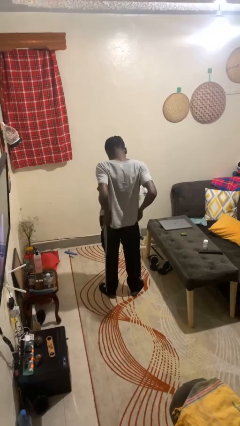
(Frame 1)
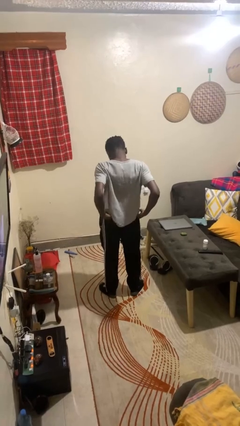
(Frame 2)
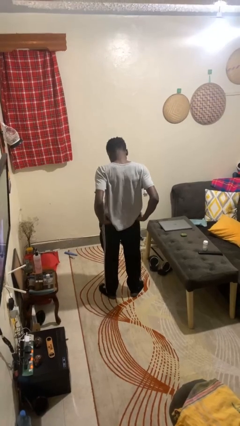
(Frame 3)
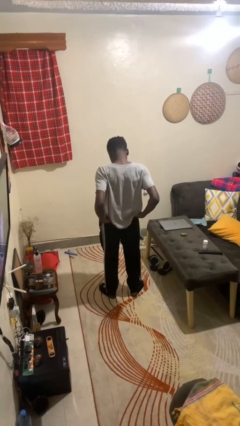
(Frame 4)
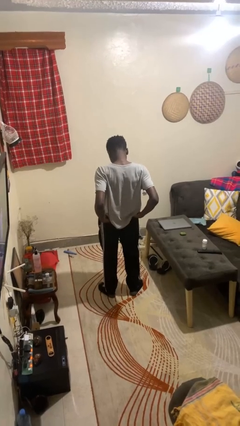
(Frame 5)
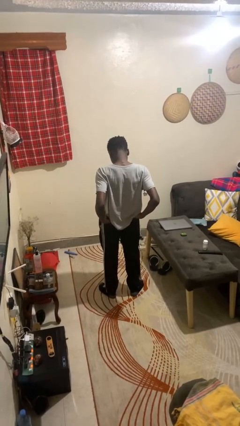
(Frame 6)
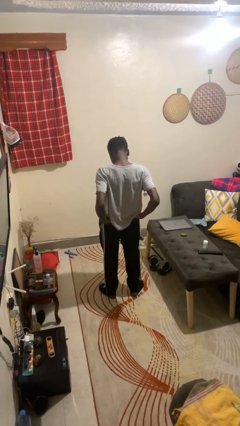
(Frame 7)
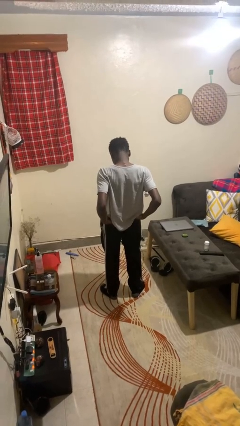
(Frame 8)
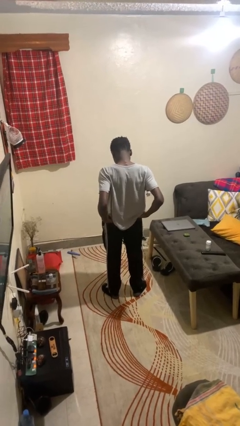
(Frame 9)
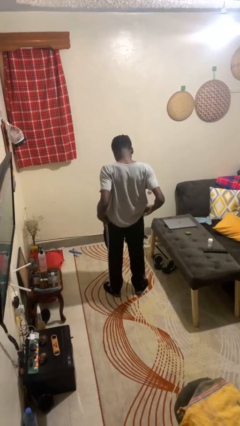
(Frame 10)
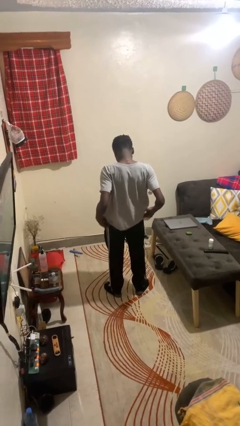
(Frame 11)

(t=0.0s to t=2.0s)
person puts hands in back pockets

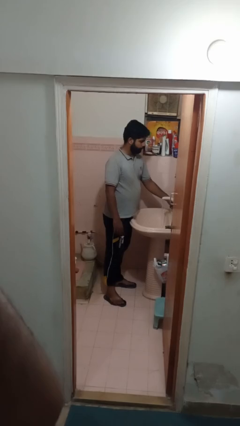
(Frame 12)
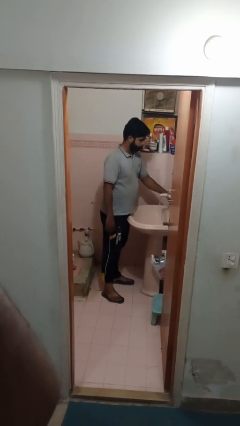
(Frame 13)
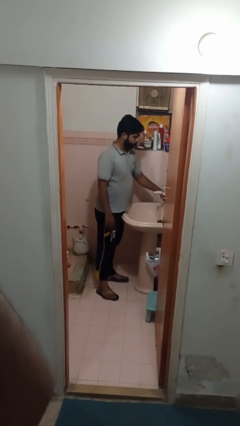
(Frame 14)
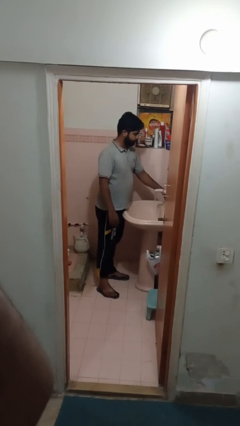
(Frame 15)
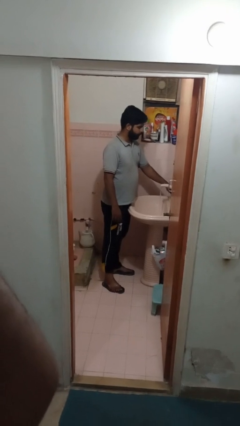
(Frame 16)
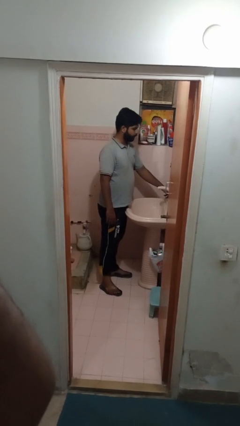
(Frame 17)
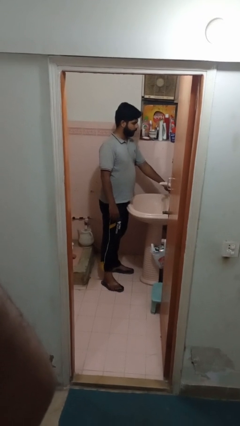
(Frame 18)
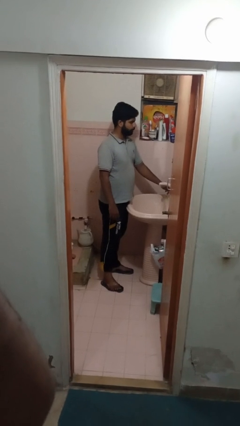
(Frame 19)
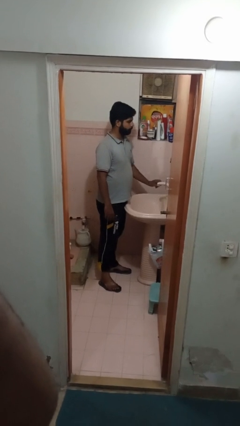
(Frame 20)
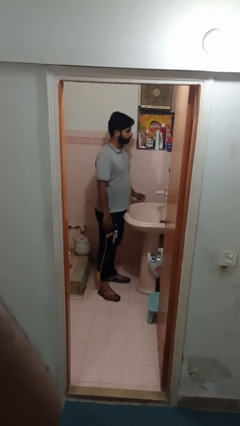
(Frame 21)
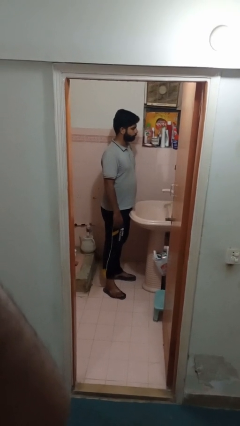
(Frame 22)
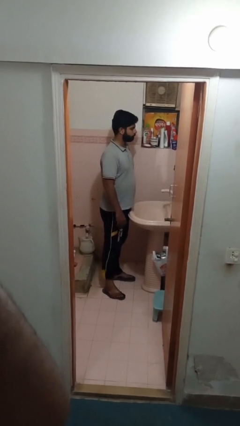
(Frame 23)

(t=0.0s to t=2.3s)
person turns off faucet

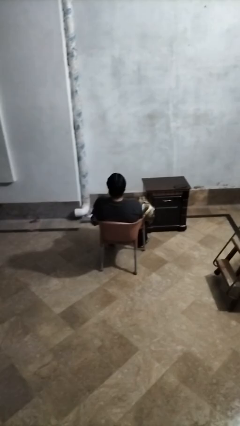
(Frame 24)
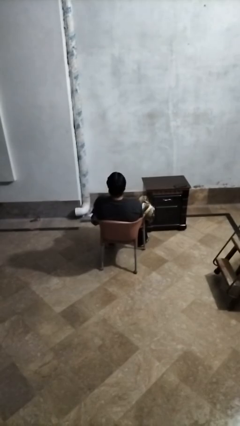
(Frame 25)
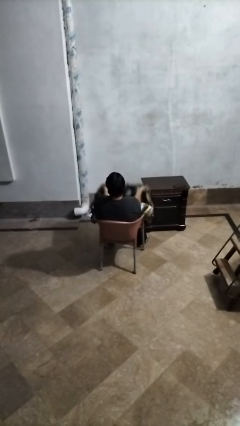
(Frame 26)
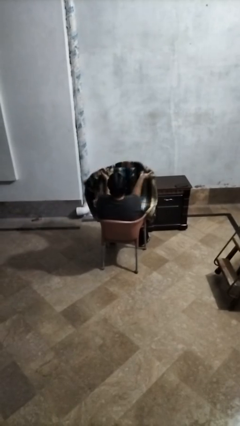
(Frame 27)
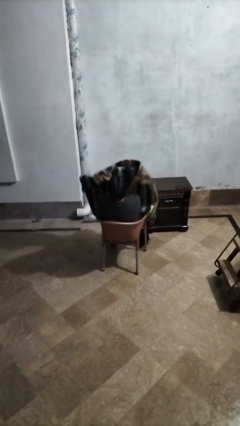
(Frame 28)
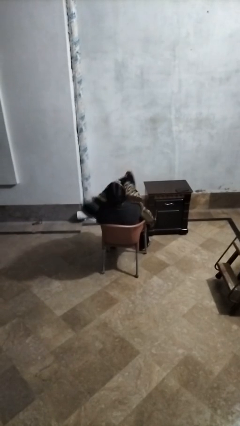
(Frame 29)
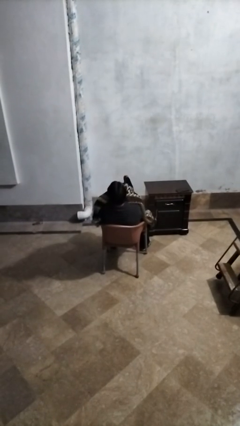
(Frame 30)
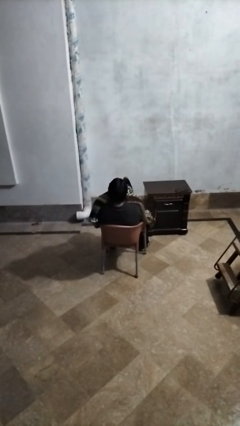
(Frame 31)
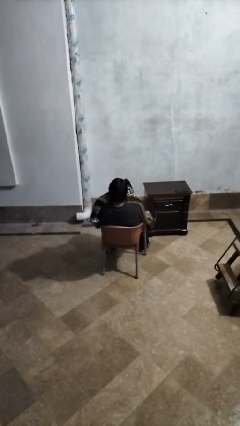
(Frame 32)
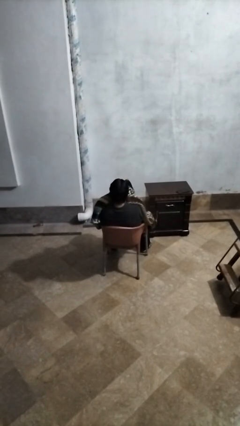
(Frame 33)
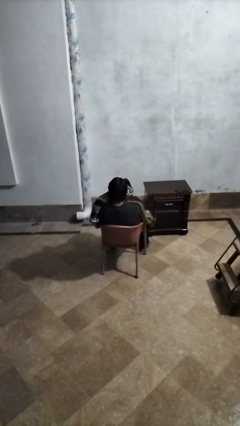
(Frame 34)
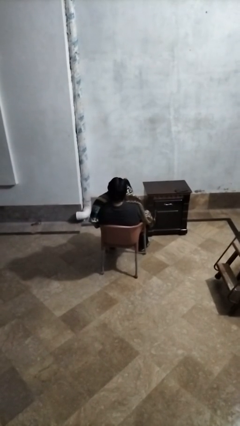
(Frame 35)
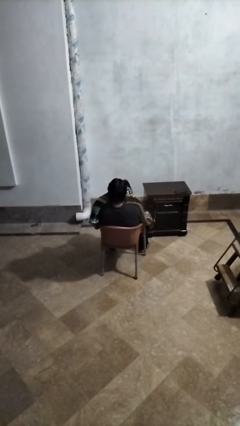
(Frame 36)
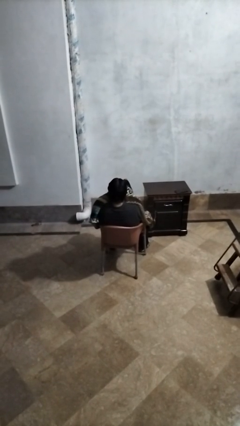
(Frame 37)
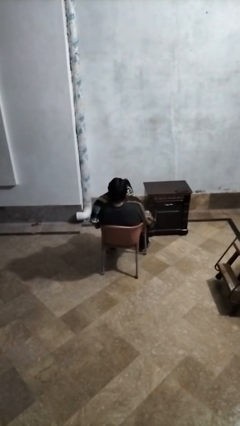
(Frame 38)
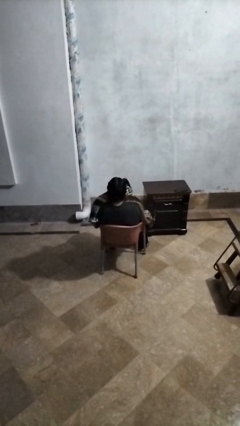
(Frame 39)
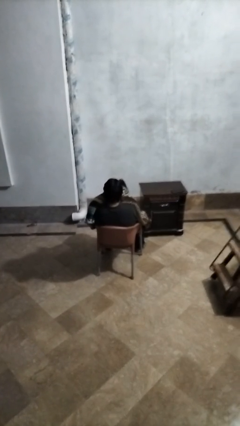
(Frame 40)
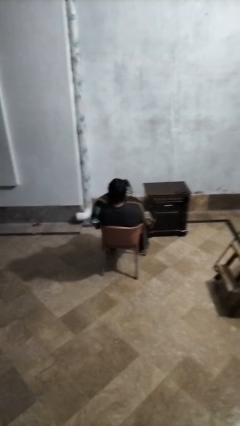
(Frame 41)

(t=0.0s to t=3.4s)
person covers with blanket

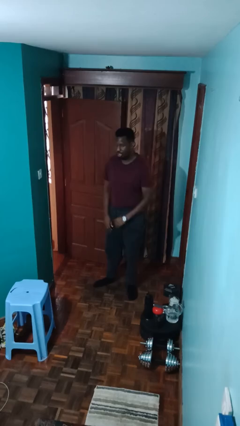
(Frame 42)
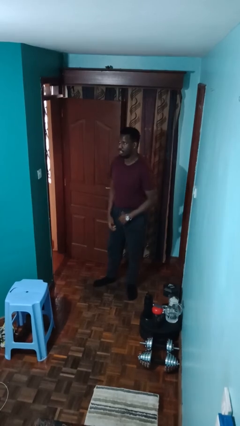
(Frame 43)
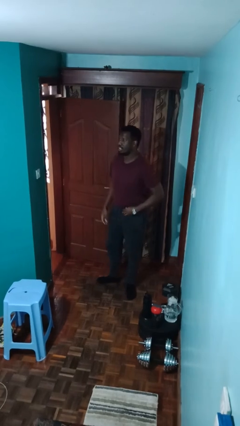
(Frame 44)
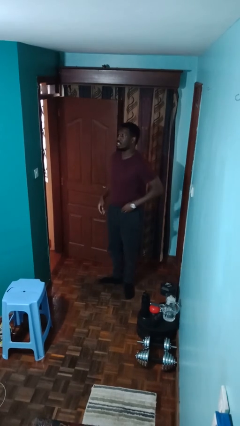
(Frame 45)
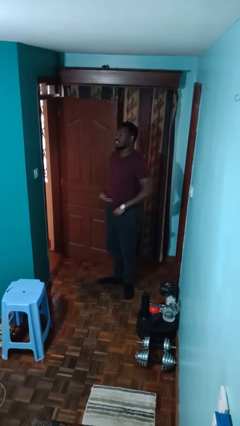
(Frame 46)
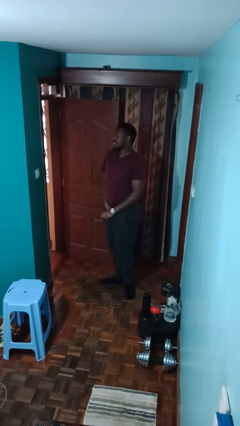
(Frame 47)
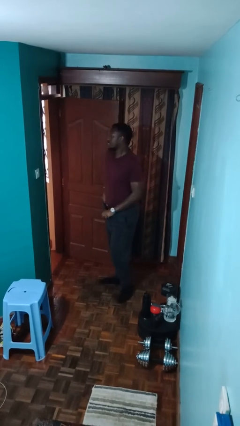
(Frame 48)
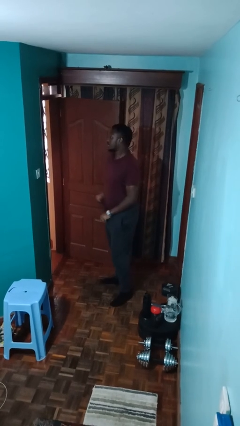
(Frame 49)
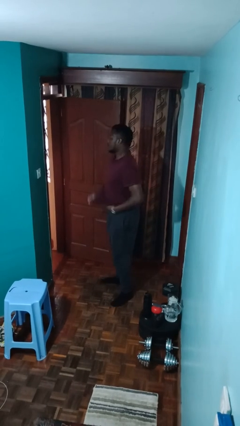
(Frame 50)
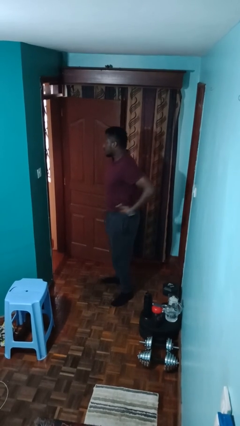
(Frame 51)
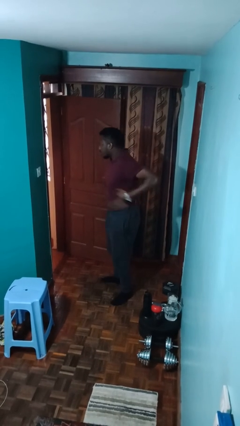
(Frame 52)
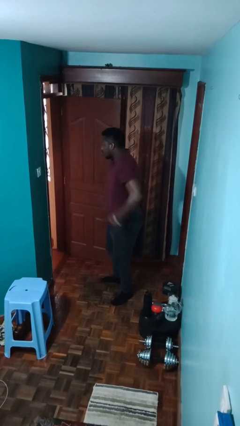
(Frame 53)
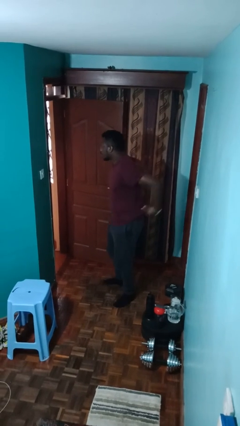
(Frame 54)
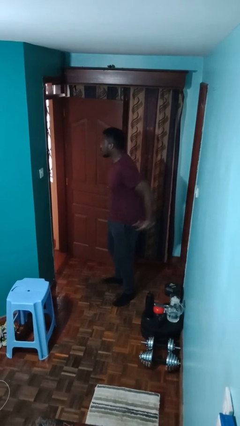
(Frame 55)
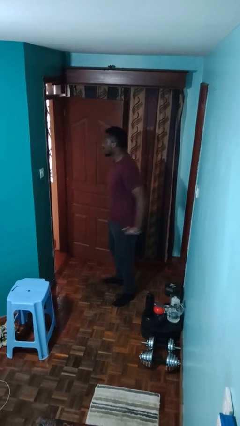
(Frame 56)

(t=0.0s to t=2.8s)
person untucks shirt

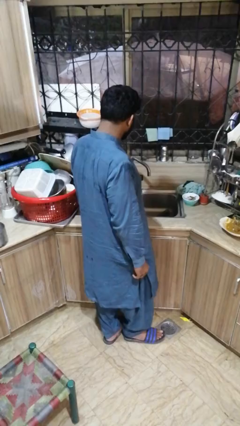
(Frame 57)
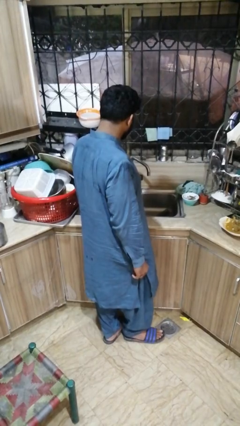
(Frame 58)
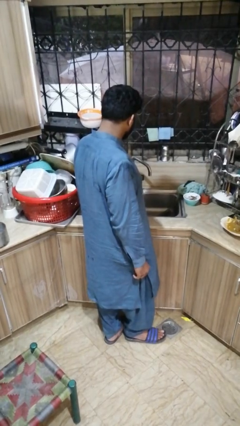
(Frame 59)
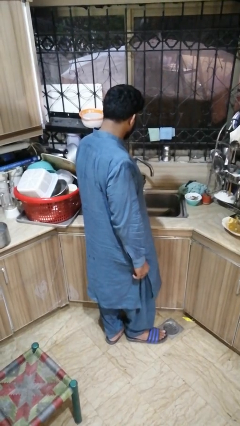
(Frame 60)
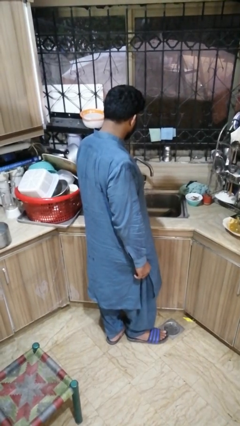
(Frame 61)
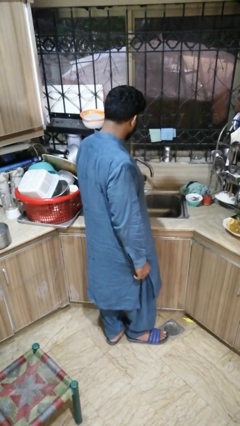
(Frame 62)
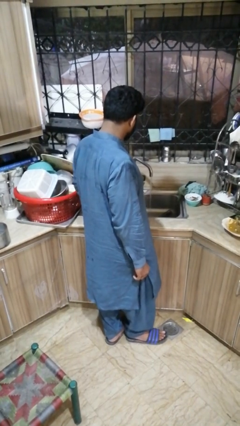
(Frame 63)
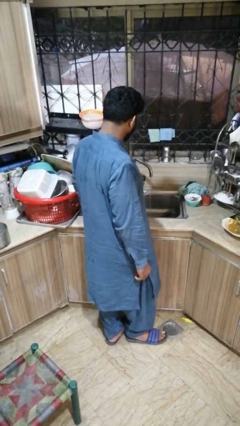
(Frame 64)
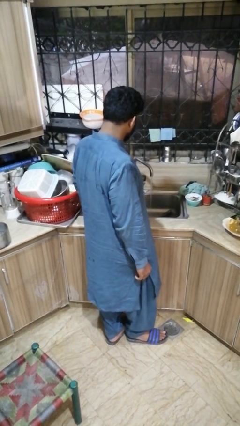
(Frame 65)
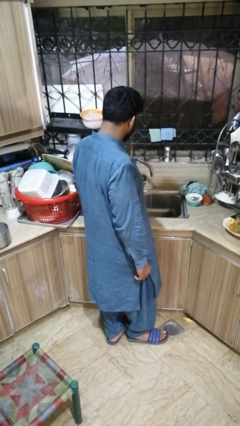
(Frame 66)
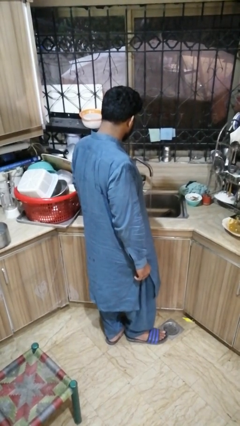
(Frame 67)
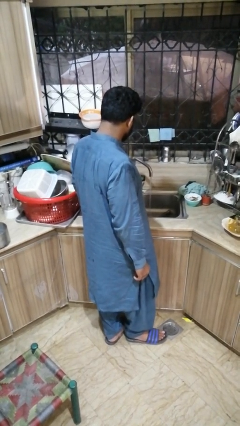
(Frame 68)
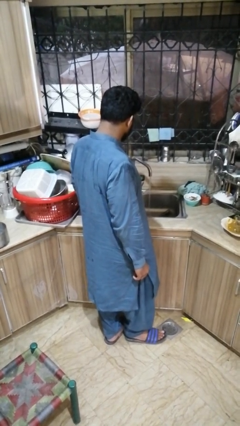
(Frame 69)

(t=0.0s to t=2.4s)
person turns on faucet

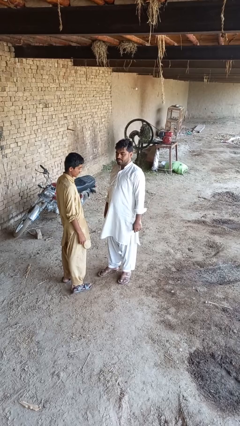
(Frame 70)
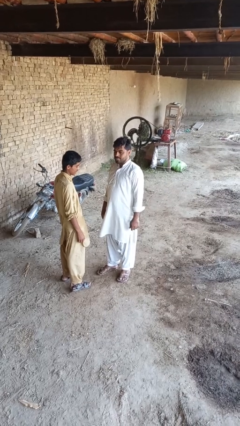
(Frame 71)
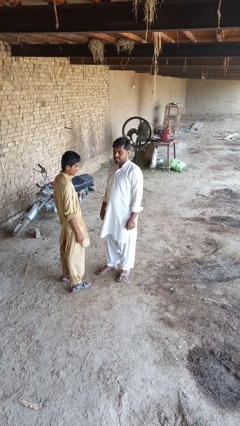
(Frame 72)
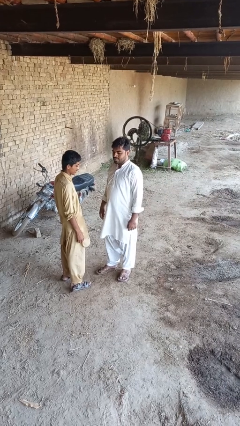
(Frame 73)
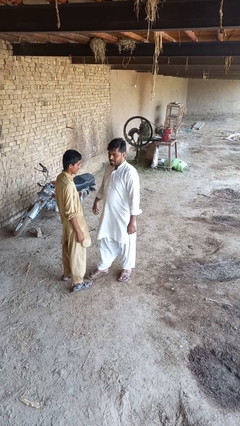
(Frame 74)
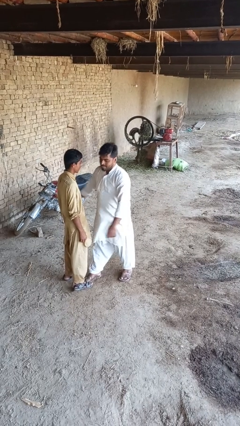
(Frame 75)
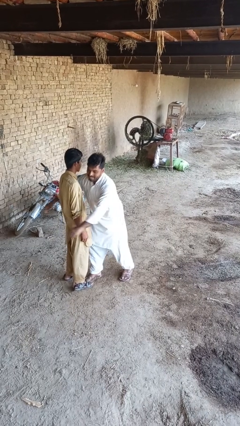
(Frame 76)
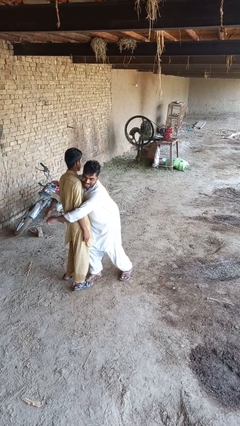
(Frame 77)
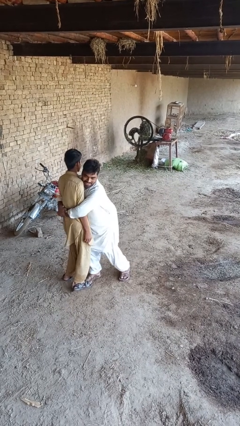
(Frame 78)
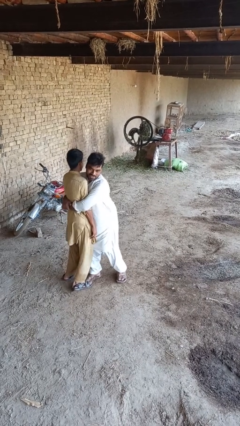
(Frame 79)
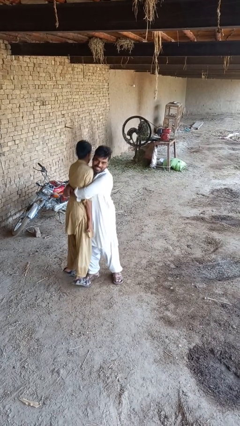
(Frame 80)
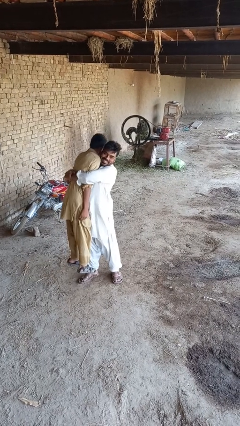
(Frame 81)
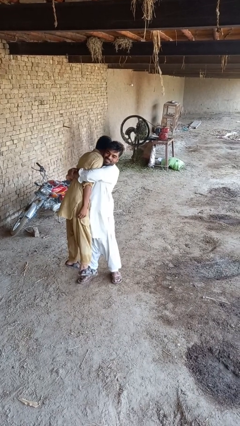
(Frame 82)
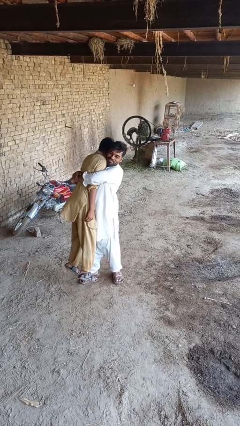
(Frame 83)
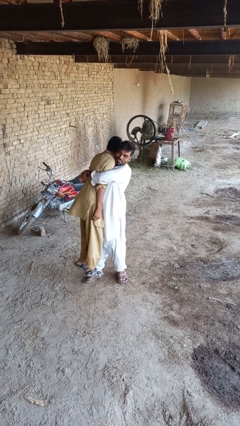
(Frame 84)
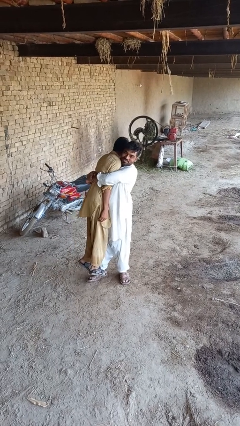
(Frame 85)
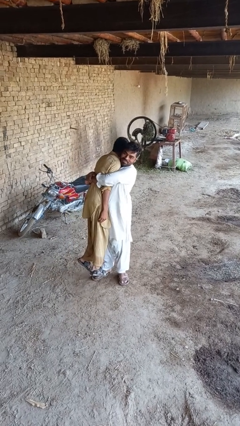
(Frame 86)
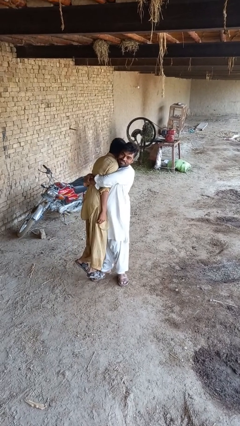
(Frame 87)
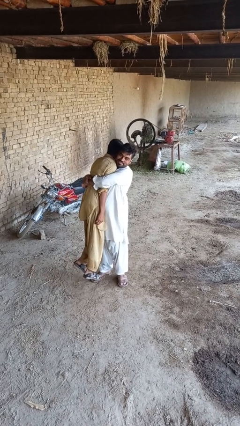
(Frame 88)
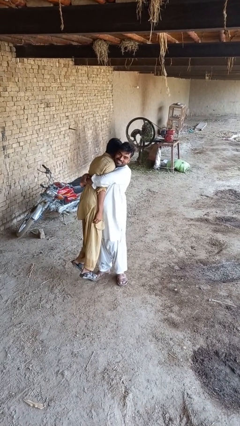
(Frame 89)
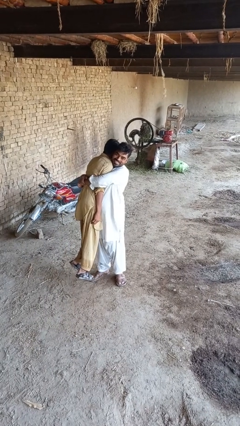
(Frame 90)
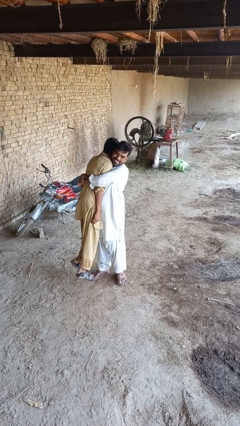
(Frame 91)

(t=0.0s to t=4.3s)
person picks up person

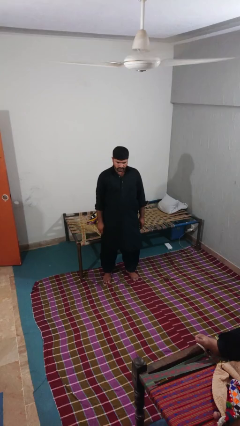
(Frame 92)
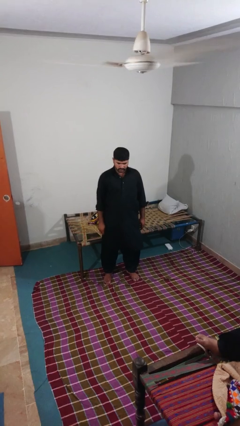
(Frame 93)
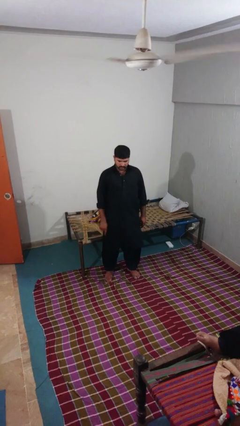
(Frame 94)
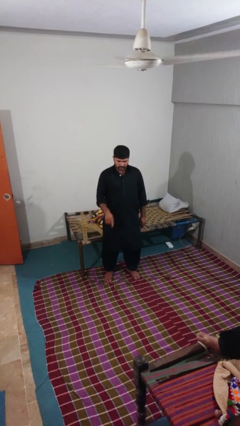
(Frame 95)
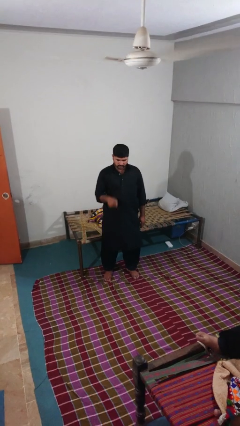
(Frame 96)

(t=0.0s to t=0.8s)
person gestures swipe up
